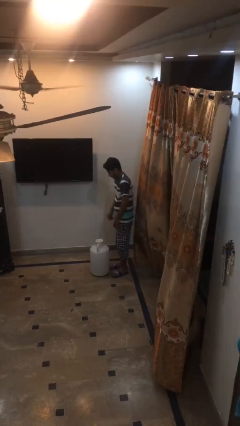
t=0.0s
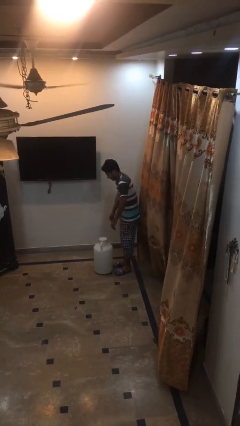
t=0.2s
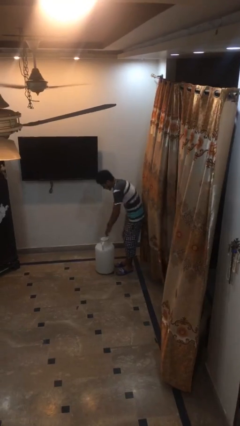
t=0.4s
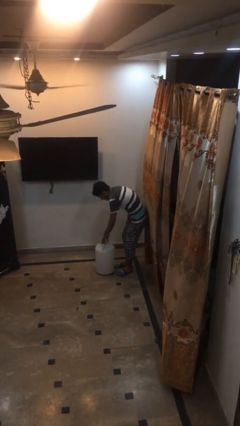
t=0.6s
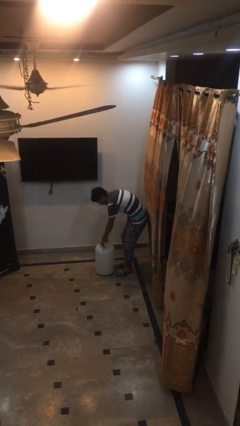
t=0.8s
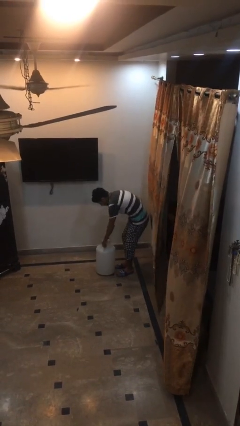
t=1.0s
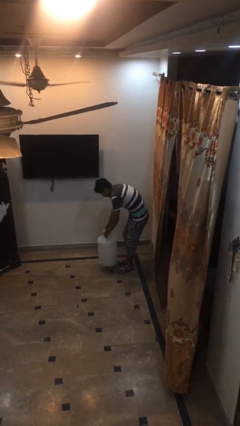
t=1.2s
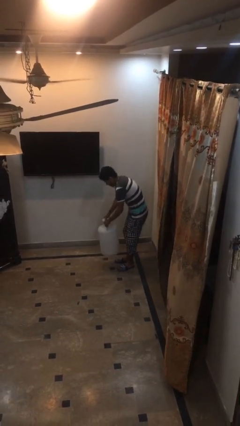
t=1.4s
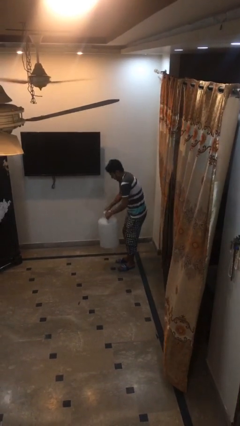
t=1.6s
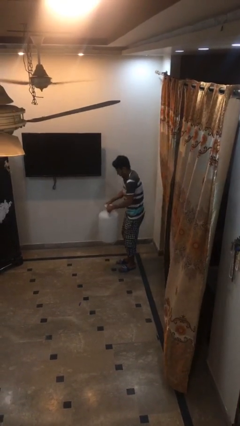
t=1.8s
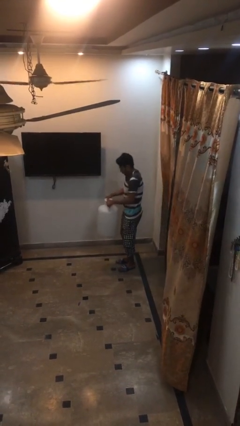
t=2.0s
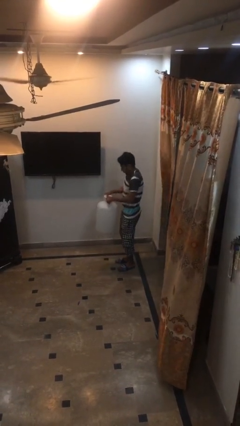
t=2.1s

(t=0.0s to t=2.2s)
person picks up object from floor

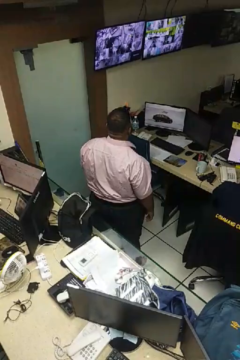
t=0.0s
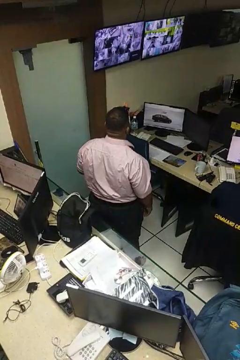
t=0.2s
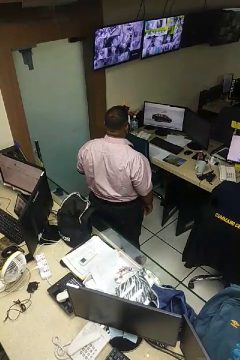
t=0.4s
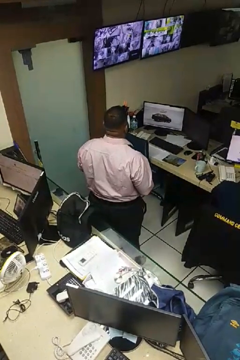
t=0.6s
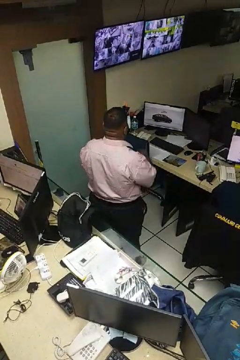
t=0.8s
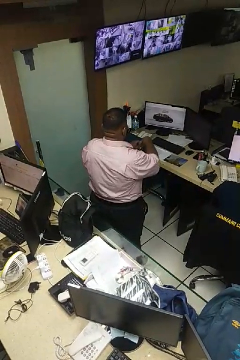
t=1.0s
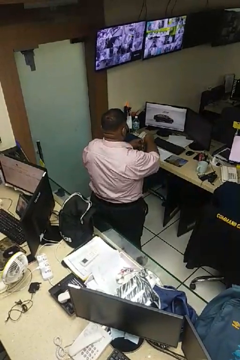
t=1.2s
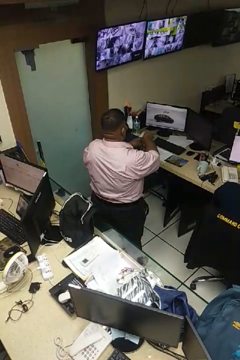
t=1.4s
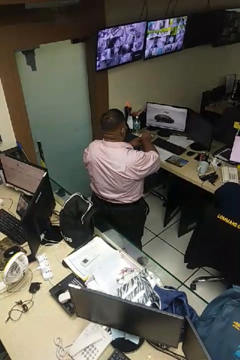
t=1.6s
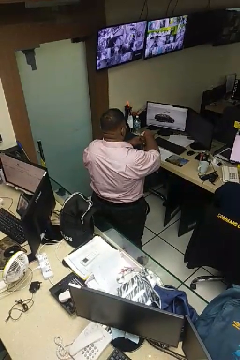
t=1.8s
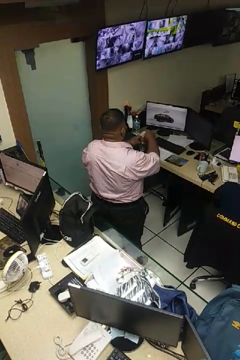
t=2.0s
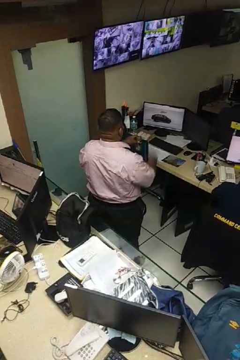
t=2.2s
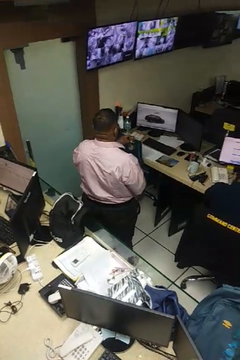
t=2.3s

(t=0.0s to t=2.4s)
person opens beverage can

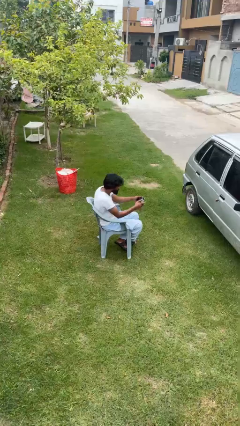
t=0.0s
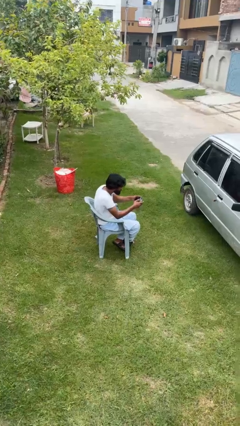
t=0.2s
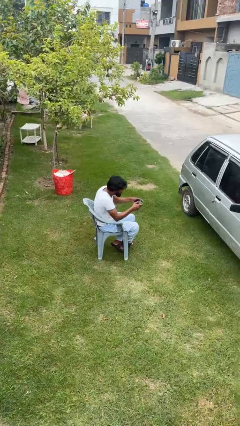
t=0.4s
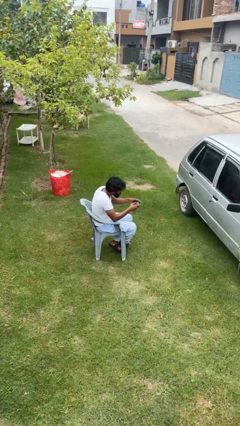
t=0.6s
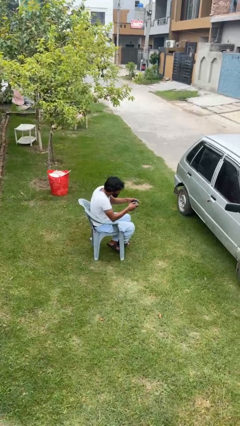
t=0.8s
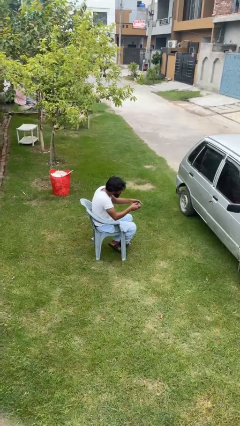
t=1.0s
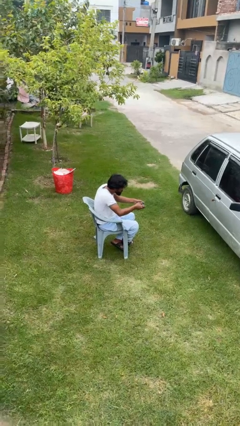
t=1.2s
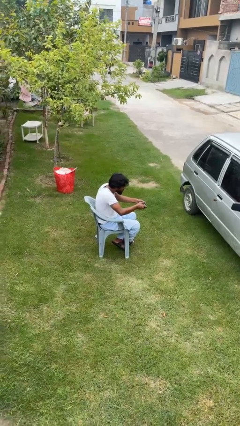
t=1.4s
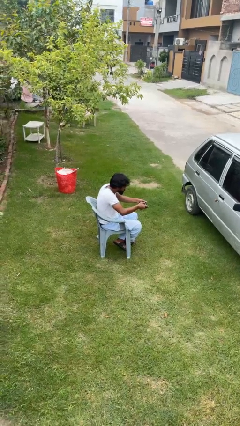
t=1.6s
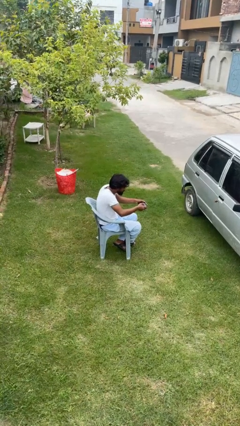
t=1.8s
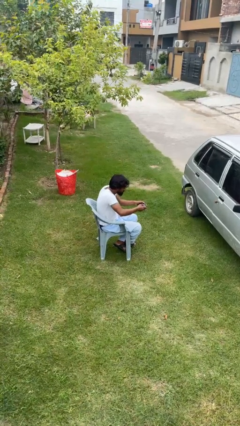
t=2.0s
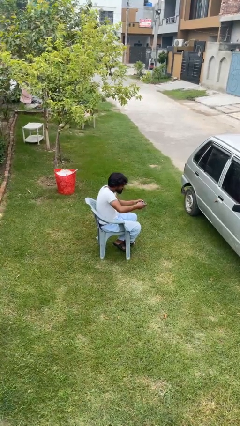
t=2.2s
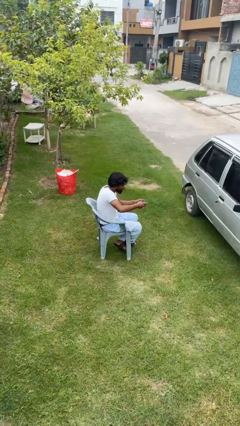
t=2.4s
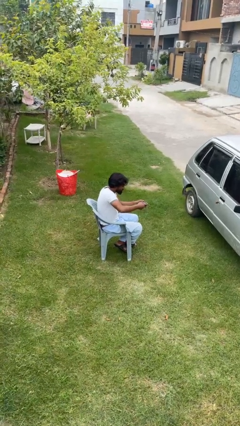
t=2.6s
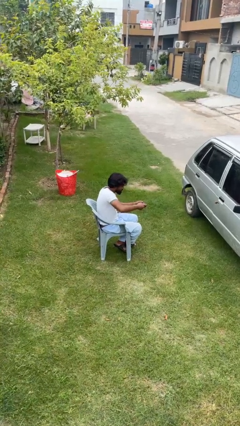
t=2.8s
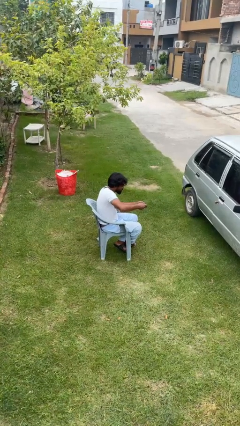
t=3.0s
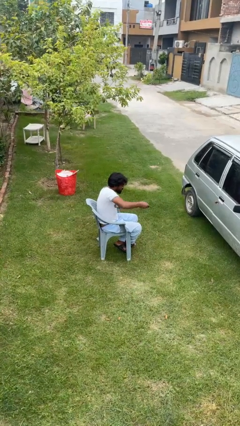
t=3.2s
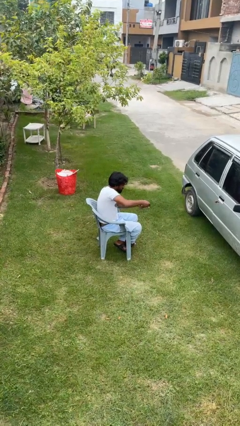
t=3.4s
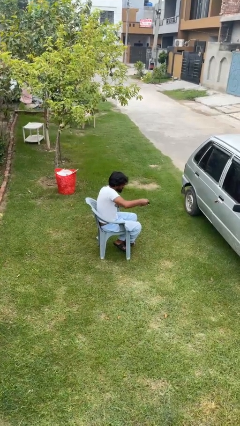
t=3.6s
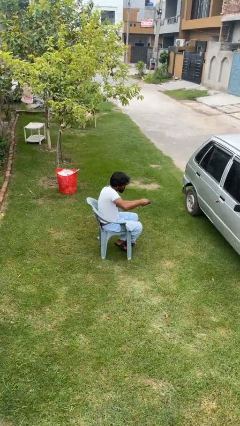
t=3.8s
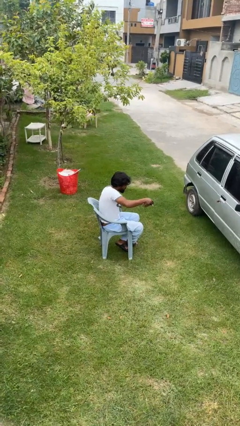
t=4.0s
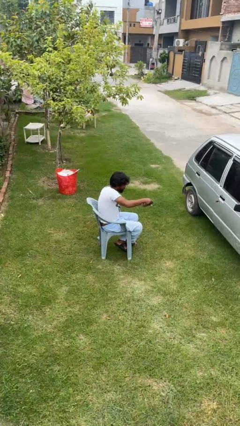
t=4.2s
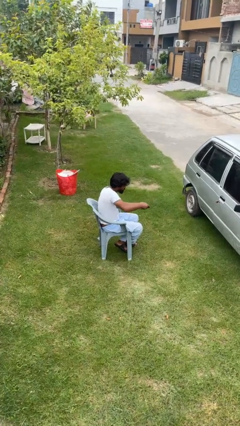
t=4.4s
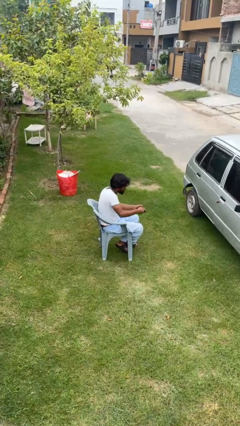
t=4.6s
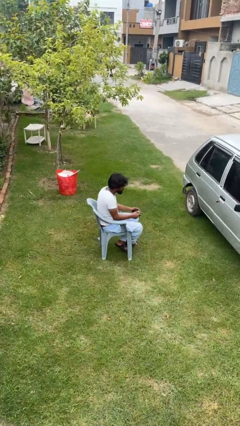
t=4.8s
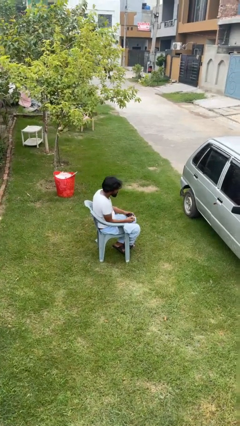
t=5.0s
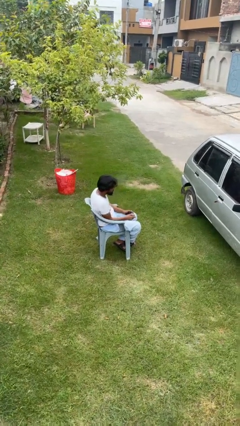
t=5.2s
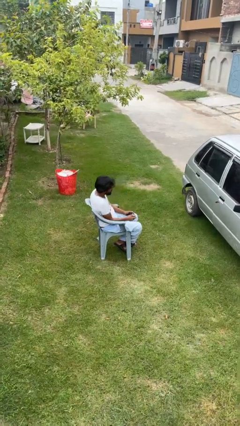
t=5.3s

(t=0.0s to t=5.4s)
person interacts with handheld game

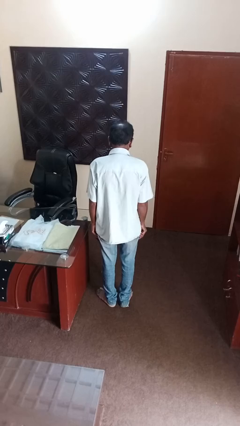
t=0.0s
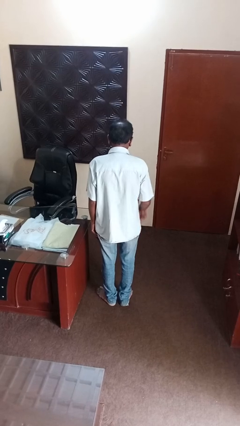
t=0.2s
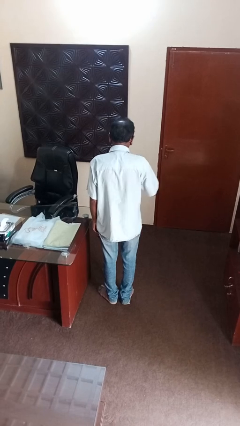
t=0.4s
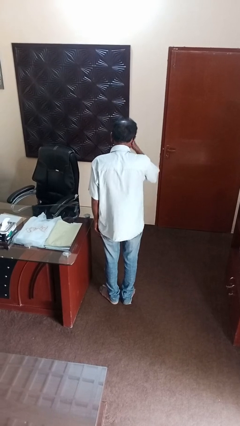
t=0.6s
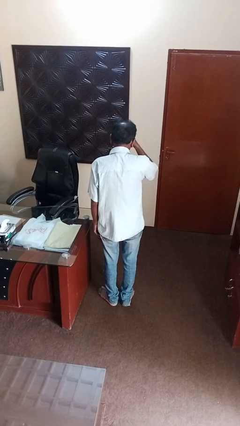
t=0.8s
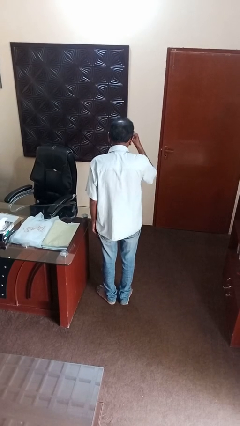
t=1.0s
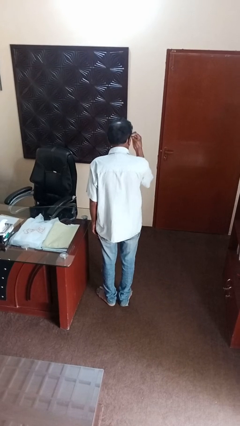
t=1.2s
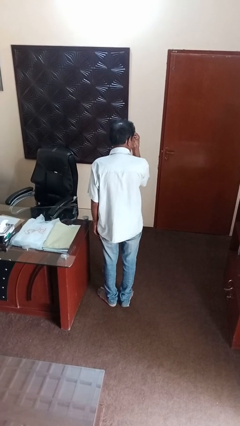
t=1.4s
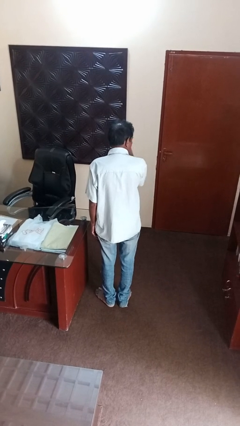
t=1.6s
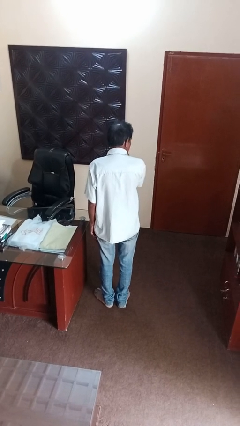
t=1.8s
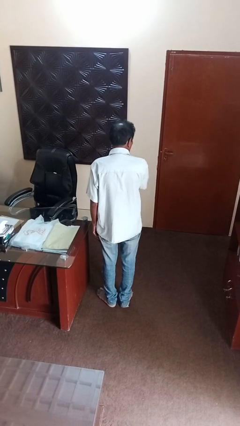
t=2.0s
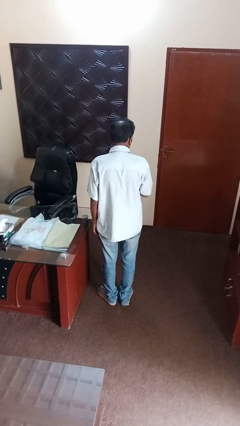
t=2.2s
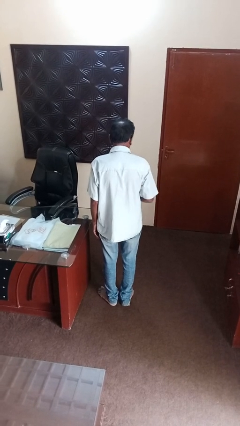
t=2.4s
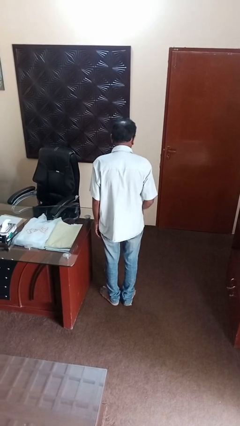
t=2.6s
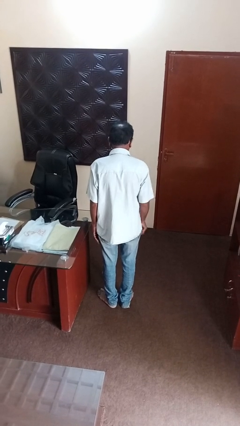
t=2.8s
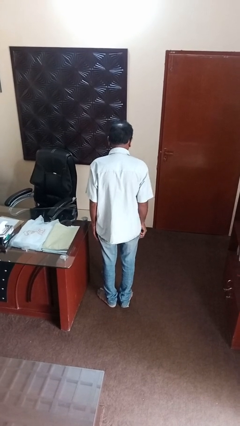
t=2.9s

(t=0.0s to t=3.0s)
person applies eye makeup

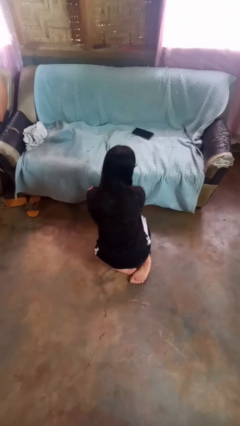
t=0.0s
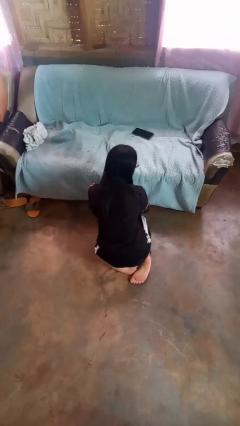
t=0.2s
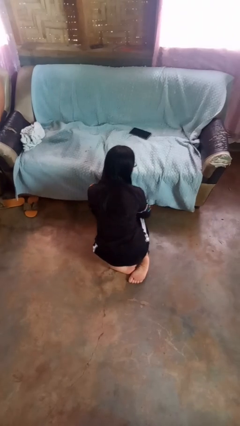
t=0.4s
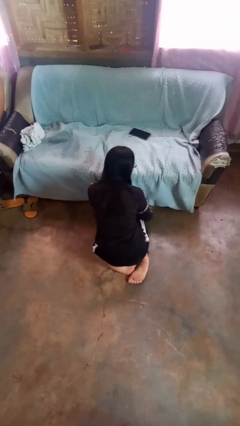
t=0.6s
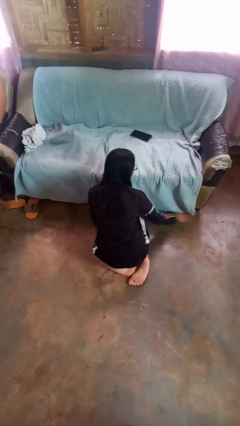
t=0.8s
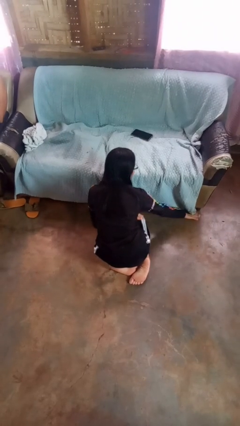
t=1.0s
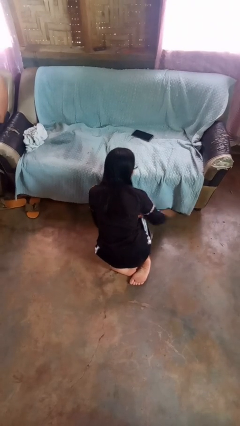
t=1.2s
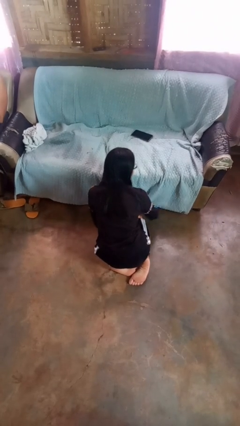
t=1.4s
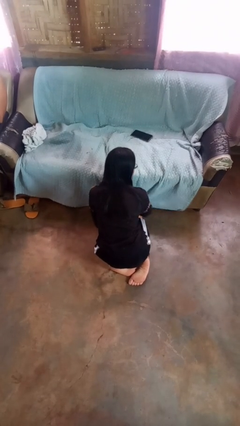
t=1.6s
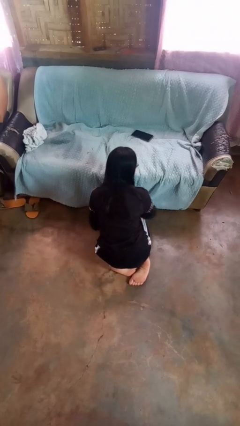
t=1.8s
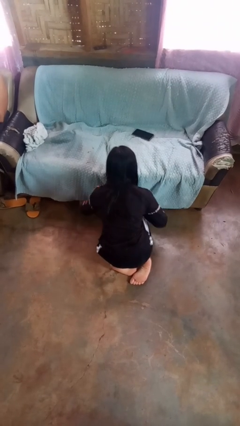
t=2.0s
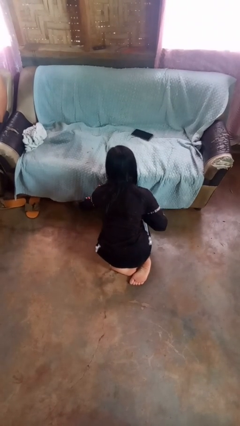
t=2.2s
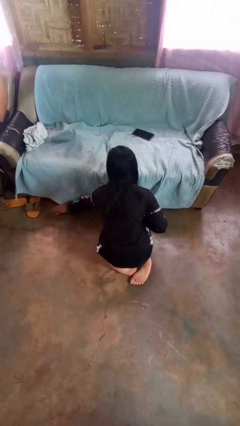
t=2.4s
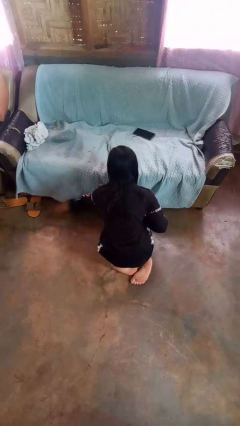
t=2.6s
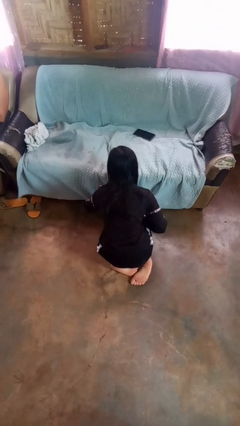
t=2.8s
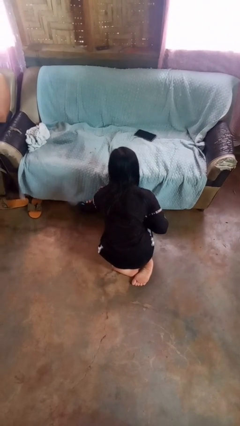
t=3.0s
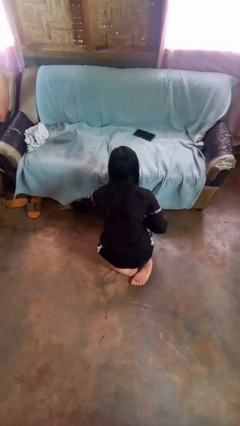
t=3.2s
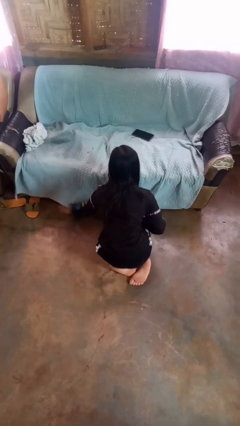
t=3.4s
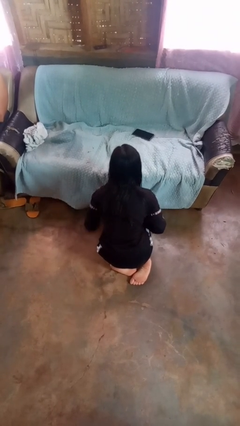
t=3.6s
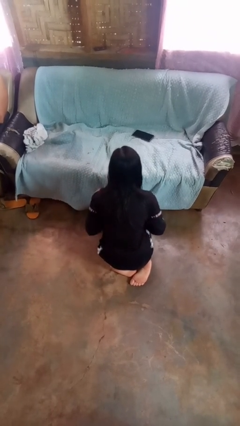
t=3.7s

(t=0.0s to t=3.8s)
person searches under couch

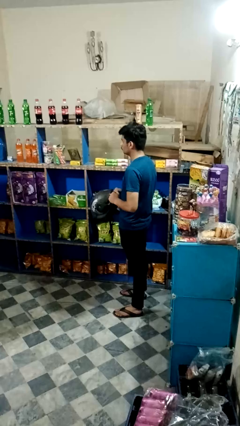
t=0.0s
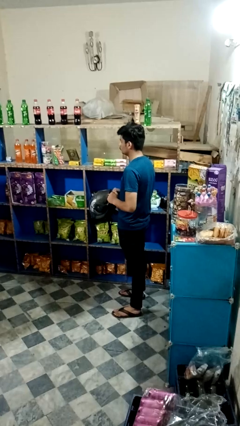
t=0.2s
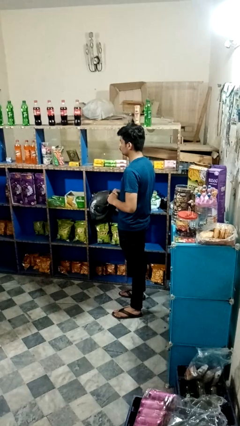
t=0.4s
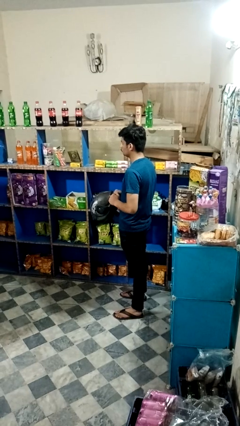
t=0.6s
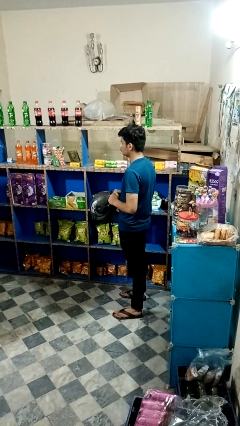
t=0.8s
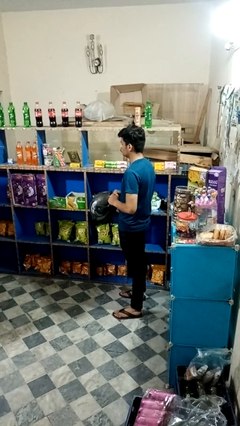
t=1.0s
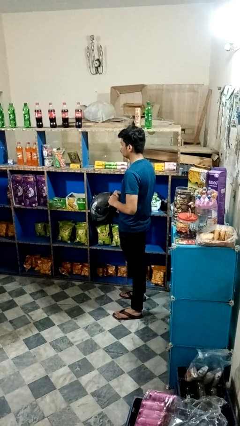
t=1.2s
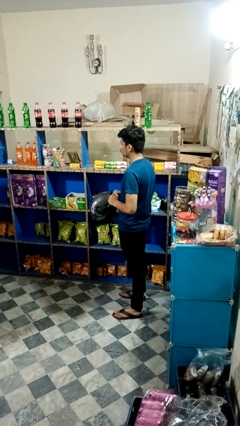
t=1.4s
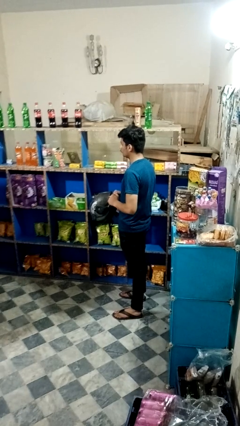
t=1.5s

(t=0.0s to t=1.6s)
person puts down object on shelf
